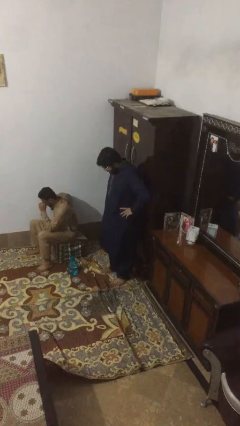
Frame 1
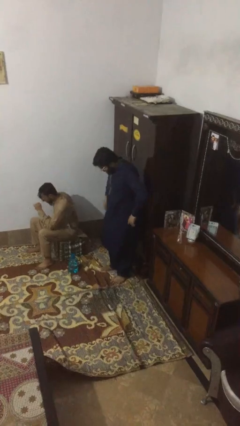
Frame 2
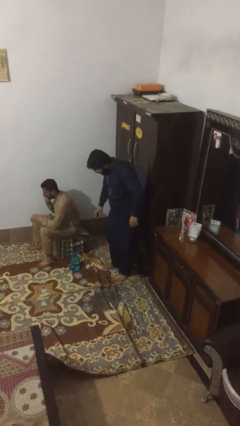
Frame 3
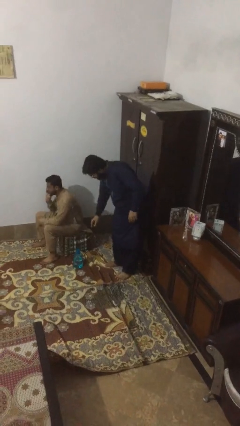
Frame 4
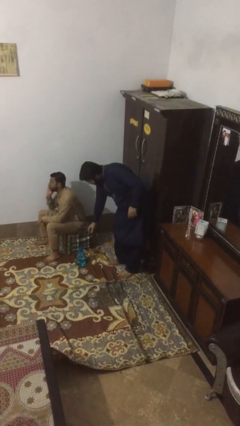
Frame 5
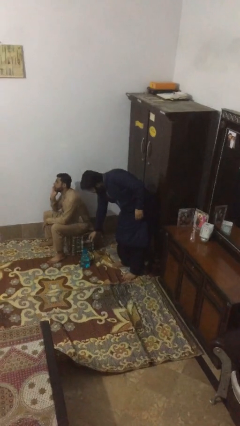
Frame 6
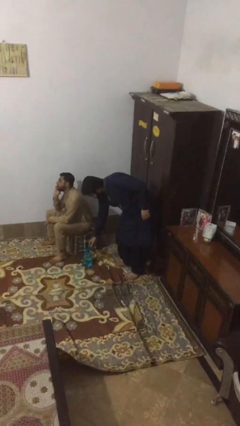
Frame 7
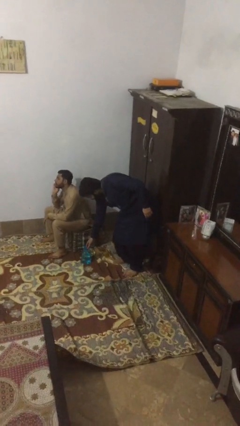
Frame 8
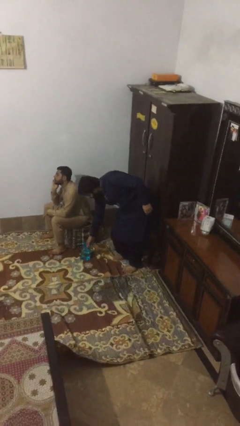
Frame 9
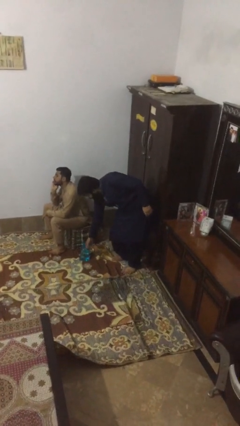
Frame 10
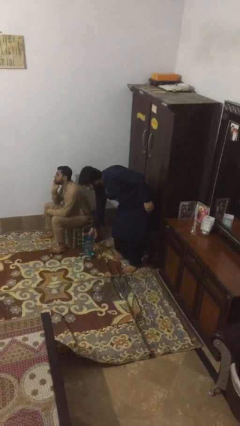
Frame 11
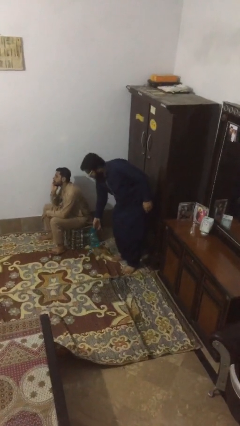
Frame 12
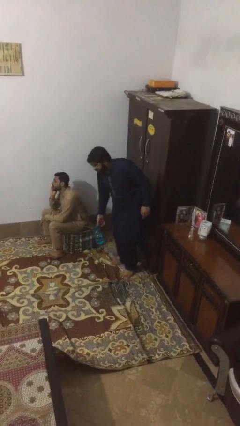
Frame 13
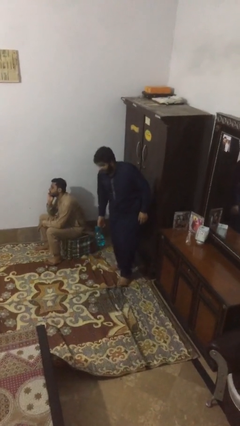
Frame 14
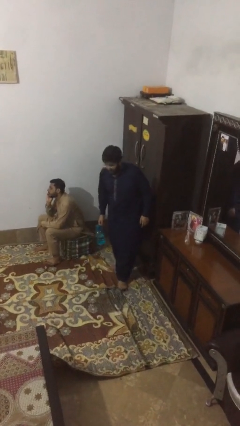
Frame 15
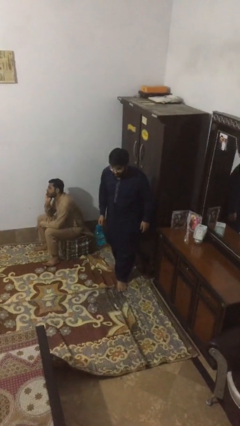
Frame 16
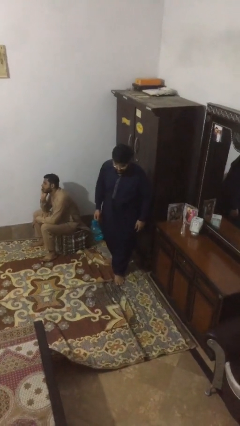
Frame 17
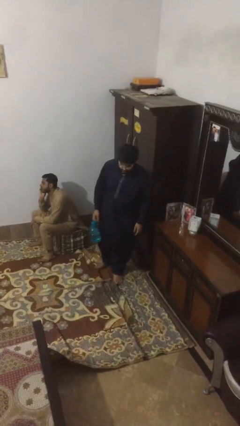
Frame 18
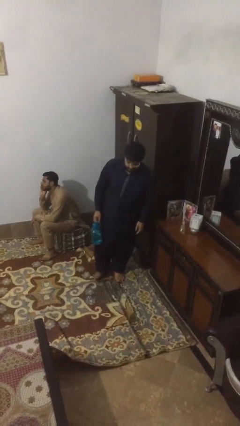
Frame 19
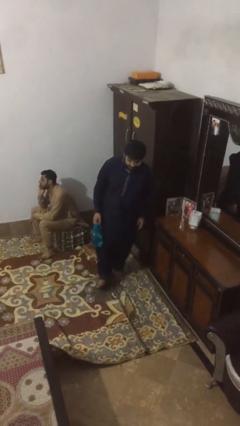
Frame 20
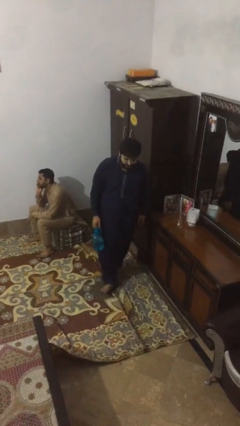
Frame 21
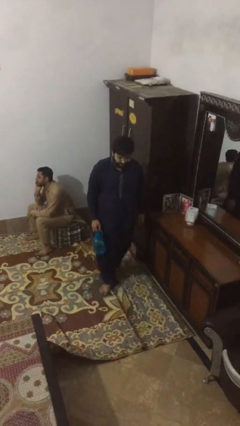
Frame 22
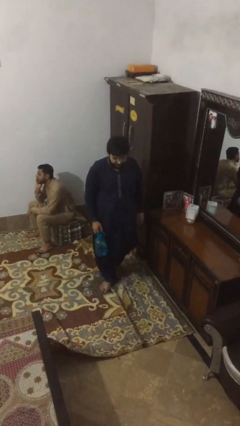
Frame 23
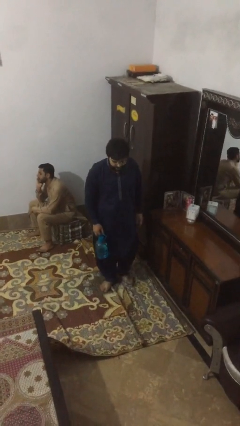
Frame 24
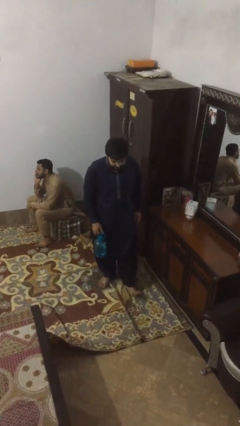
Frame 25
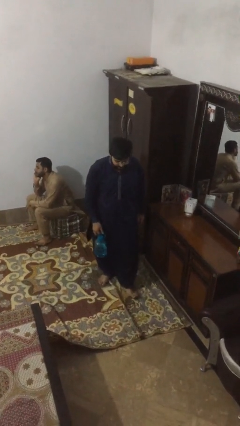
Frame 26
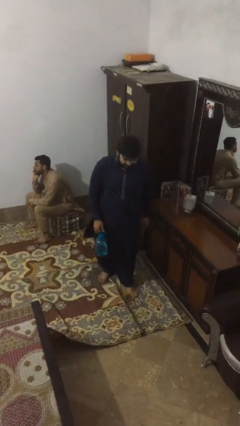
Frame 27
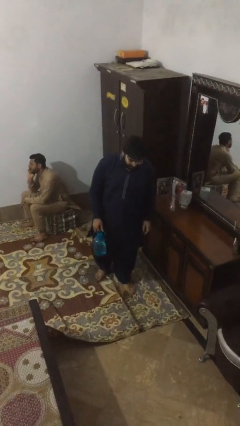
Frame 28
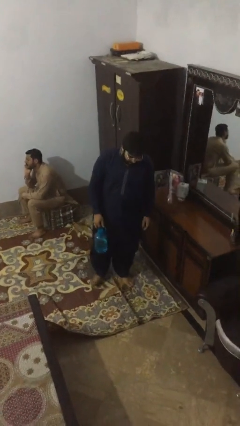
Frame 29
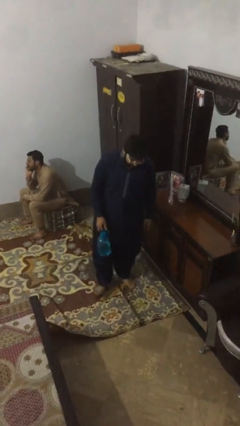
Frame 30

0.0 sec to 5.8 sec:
person steals object from person

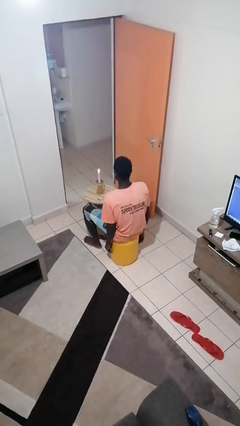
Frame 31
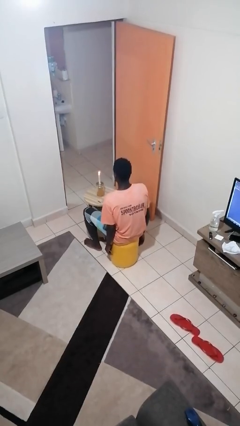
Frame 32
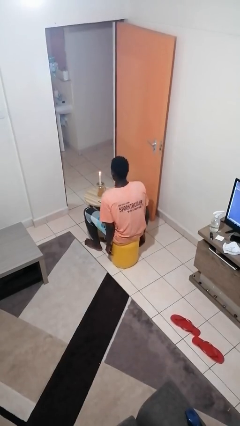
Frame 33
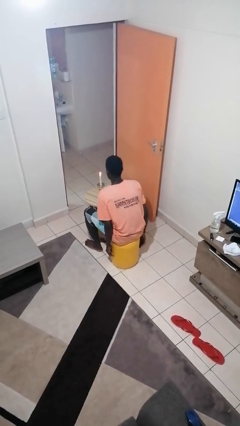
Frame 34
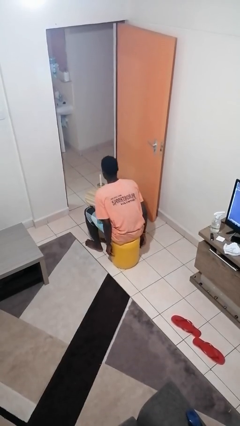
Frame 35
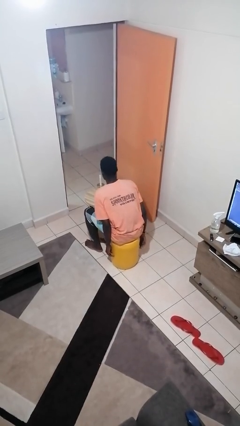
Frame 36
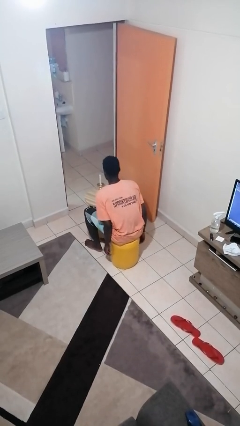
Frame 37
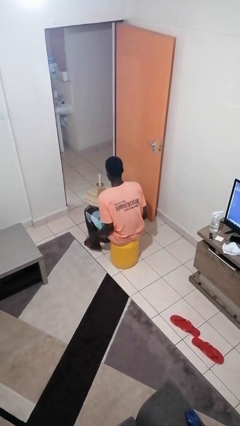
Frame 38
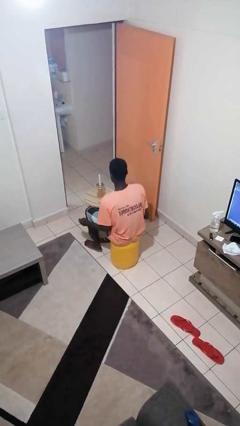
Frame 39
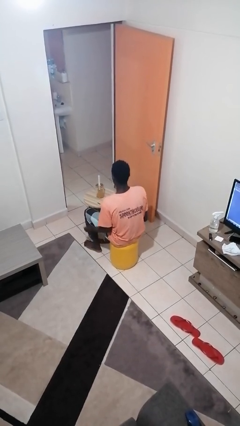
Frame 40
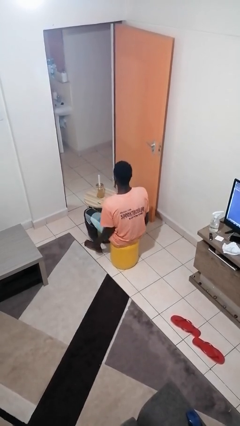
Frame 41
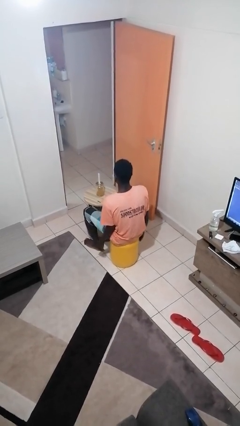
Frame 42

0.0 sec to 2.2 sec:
person extinguishes candle

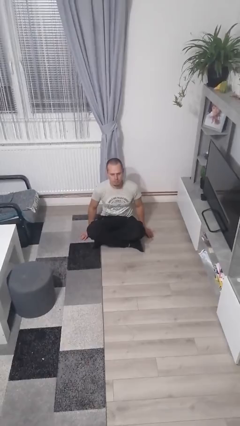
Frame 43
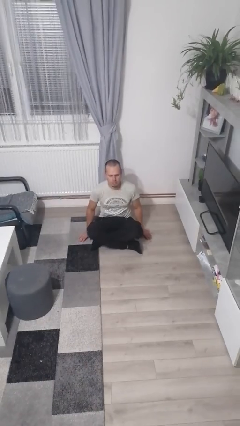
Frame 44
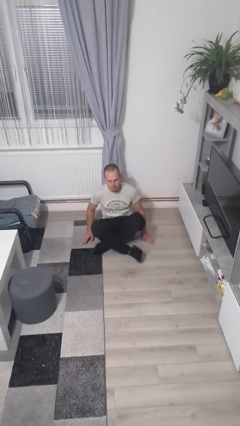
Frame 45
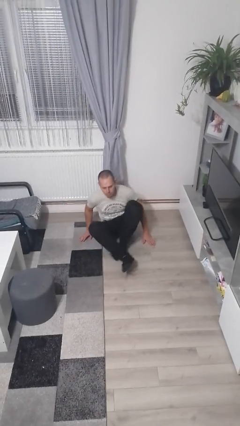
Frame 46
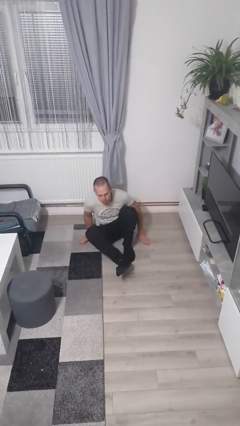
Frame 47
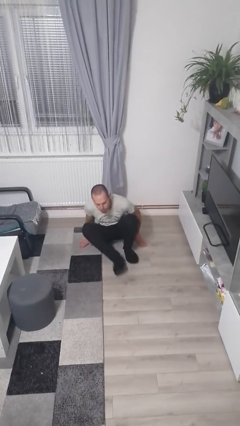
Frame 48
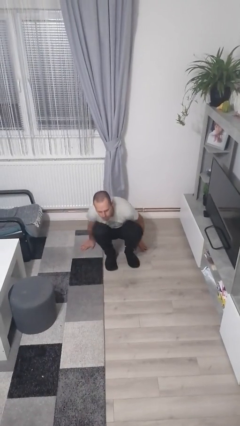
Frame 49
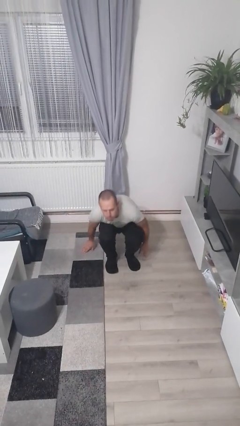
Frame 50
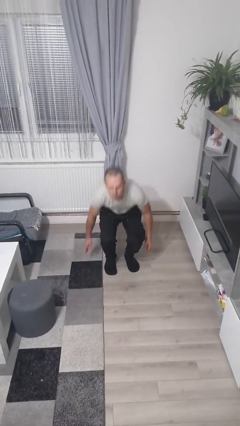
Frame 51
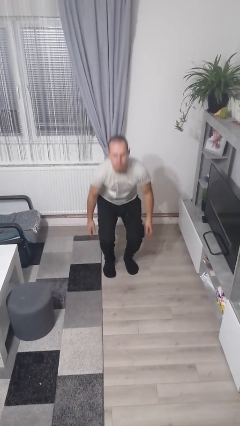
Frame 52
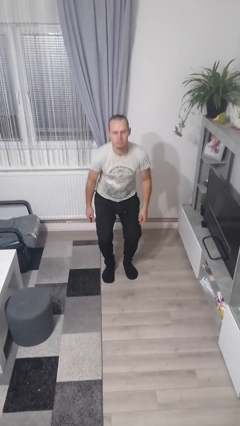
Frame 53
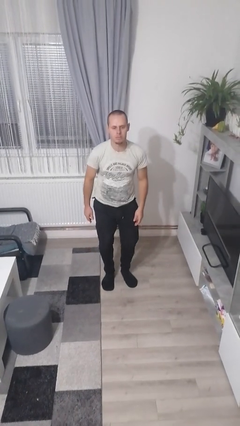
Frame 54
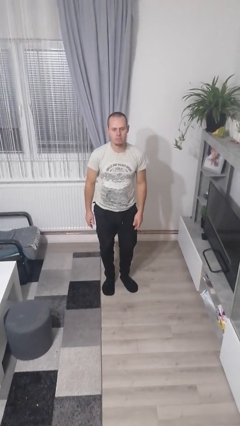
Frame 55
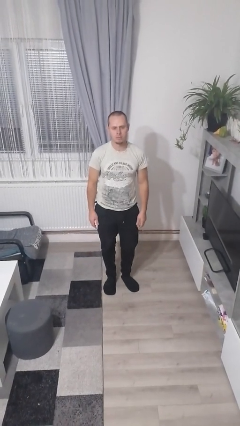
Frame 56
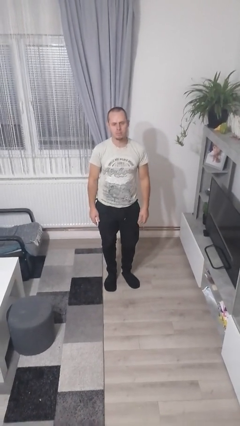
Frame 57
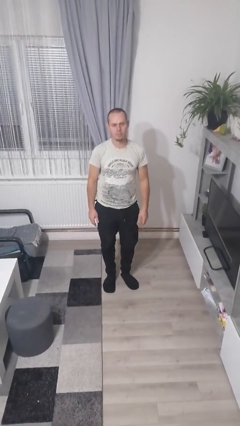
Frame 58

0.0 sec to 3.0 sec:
person stands up from floor

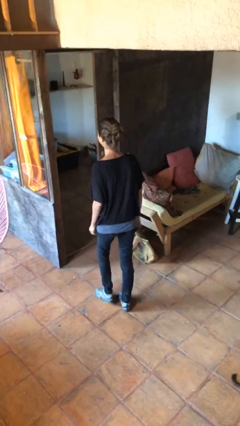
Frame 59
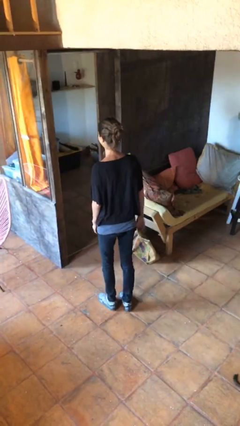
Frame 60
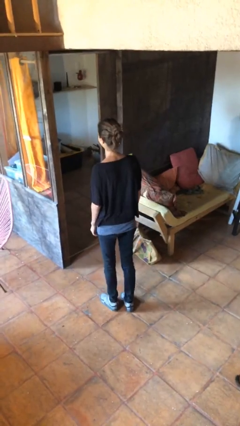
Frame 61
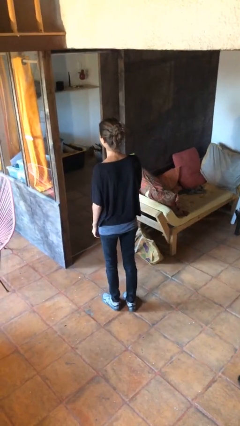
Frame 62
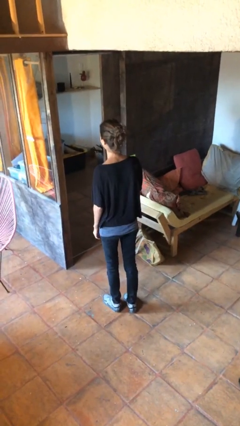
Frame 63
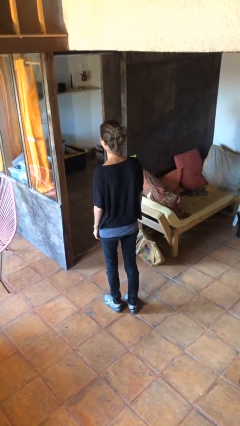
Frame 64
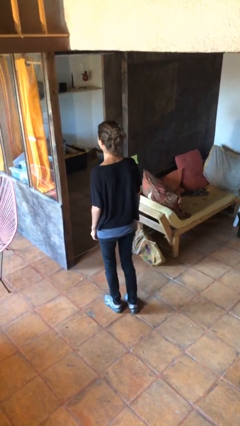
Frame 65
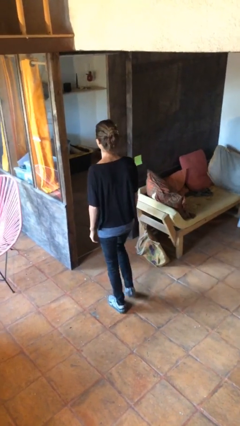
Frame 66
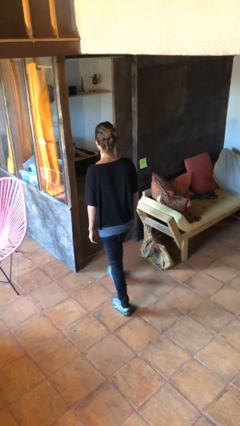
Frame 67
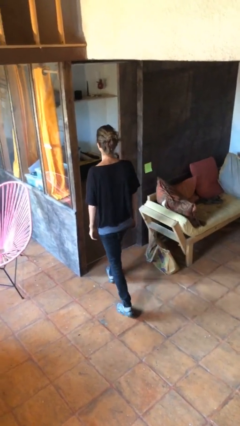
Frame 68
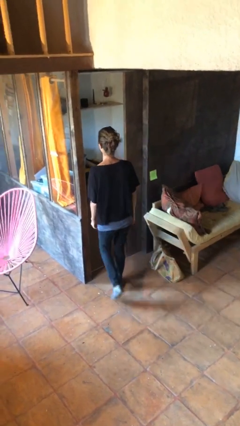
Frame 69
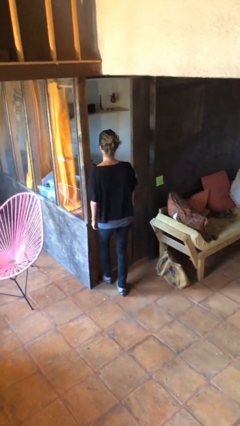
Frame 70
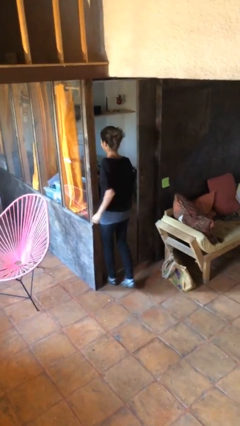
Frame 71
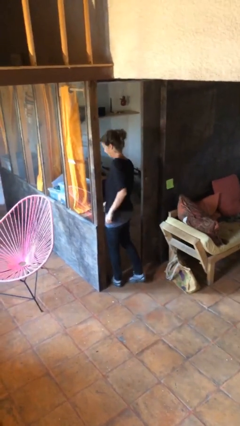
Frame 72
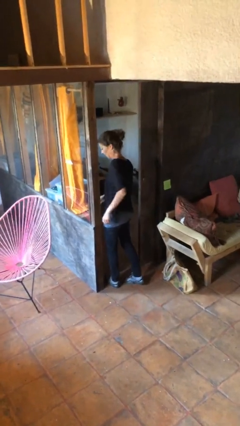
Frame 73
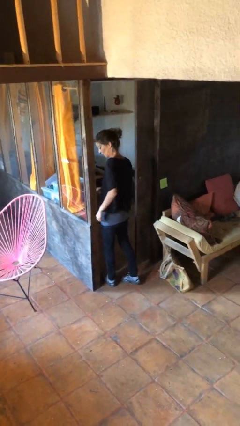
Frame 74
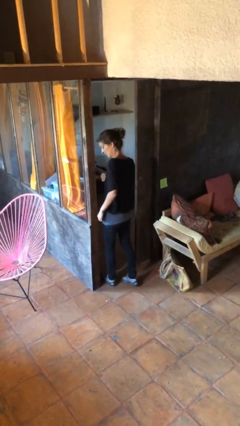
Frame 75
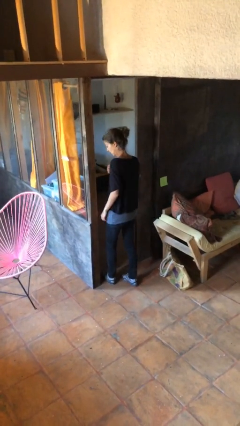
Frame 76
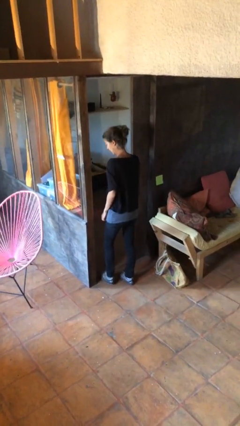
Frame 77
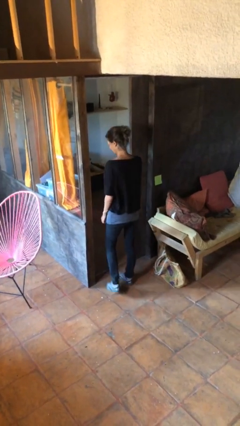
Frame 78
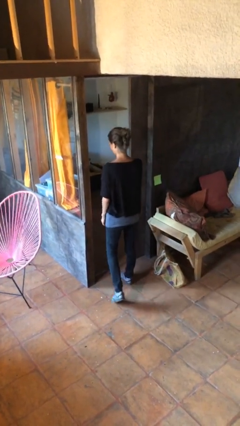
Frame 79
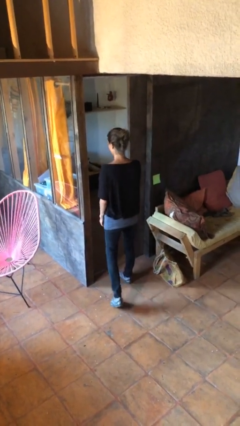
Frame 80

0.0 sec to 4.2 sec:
person bumps into wall

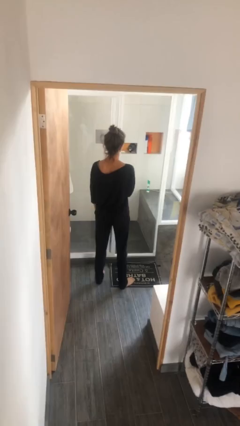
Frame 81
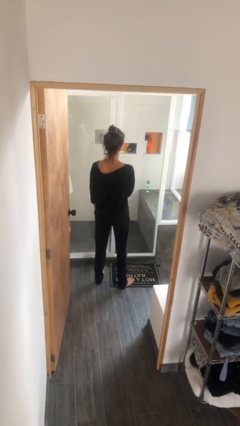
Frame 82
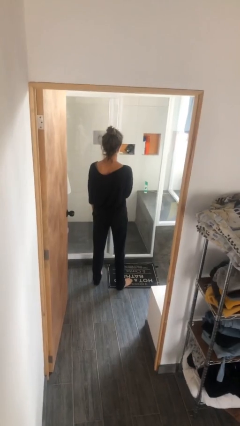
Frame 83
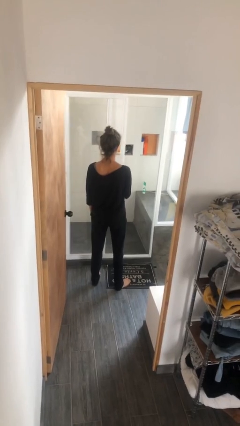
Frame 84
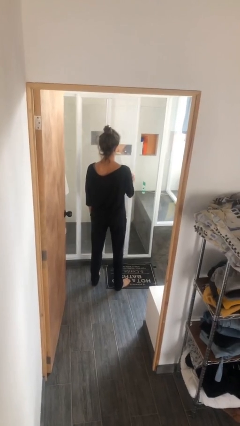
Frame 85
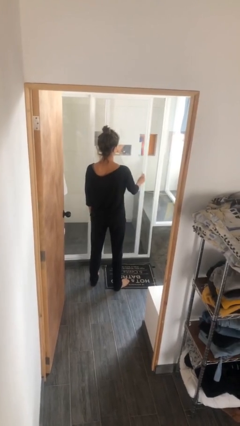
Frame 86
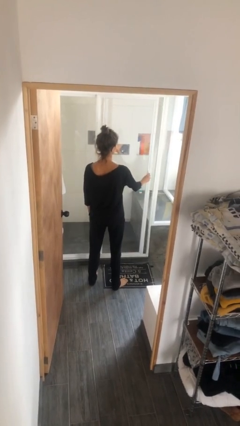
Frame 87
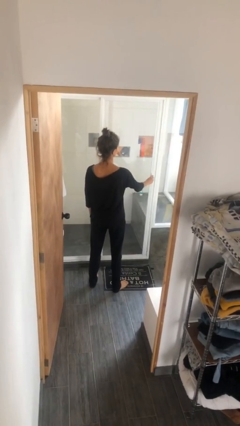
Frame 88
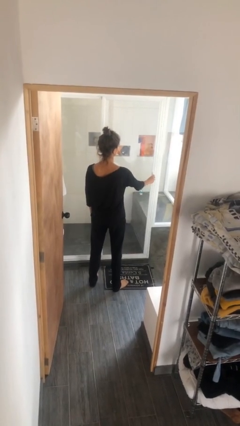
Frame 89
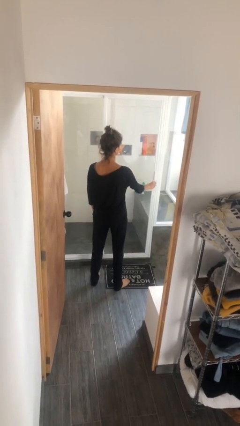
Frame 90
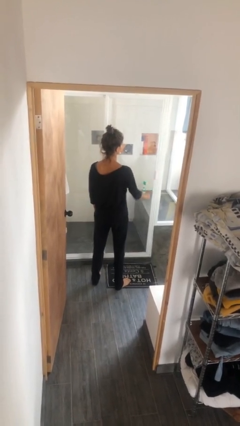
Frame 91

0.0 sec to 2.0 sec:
person closes sliding door
